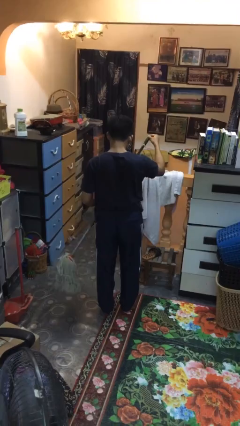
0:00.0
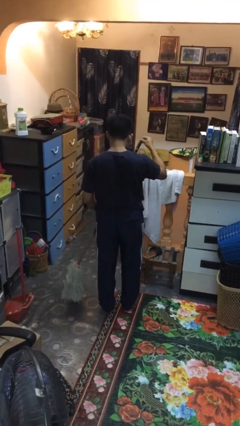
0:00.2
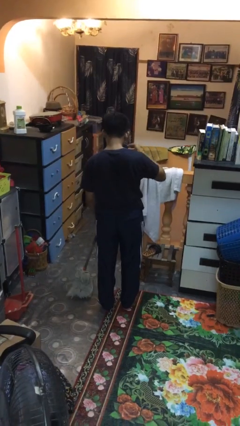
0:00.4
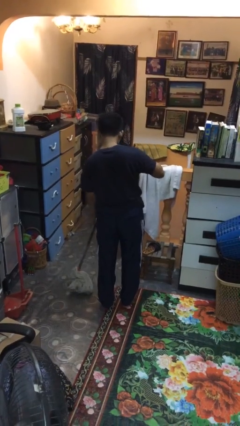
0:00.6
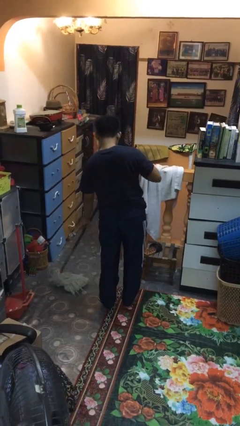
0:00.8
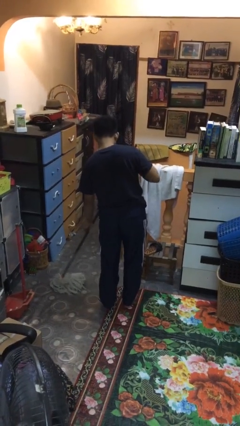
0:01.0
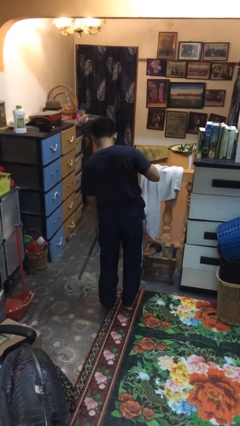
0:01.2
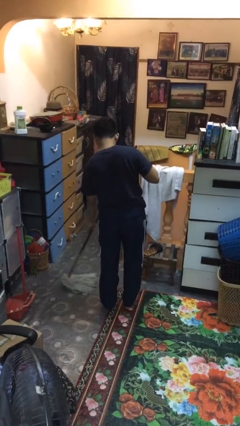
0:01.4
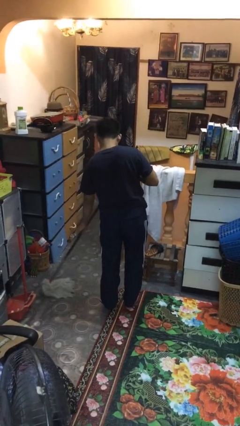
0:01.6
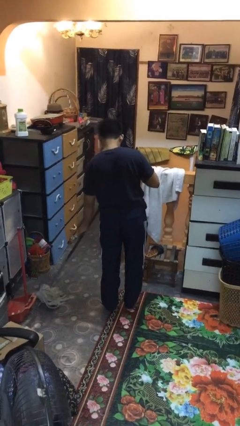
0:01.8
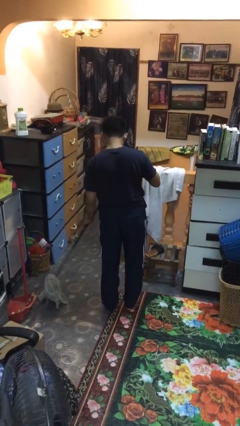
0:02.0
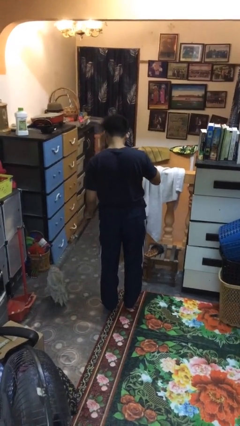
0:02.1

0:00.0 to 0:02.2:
person mops

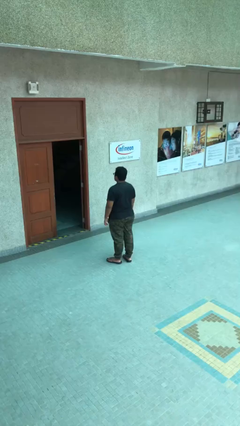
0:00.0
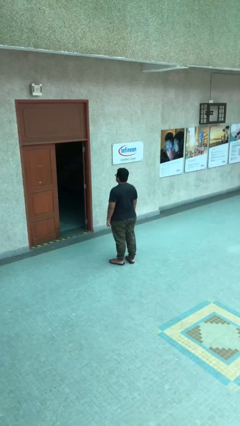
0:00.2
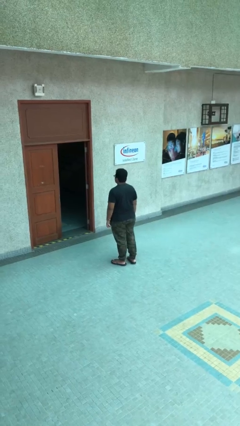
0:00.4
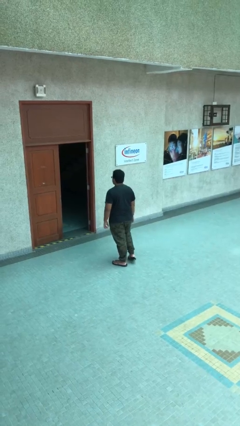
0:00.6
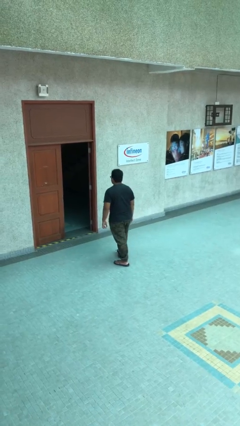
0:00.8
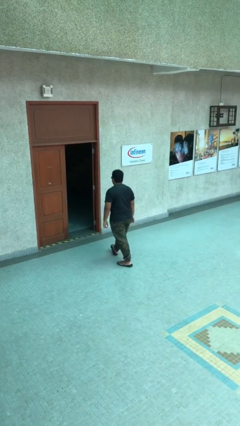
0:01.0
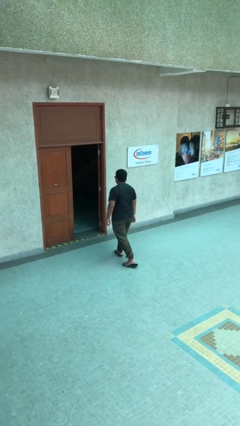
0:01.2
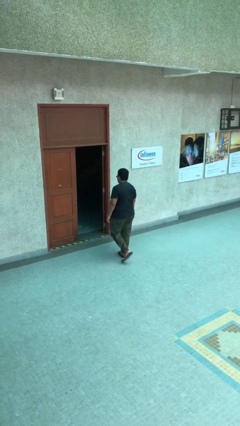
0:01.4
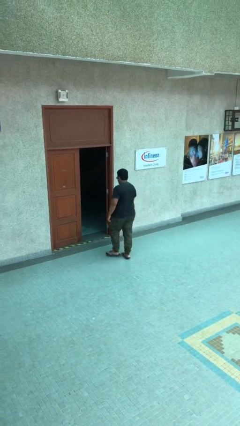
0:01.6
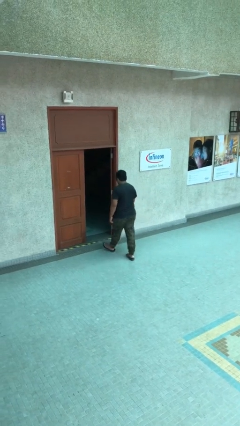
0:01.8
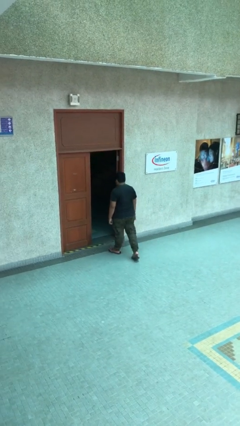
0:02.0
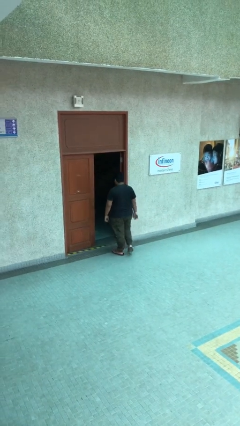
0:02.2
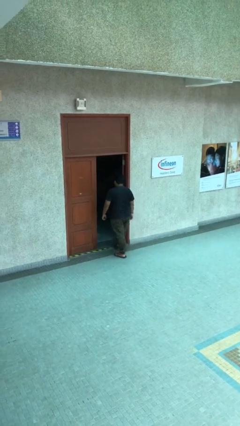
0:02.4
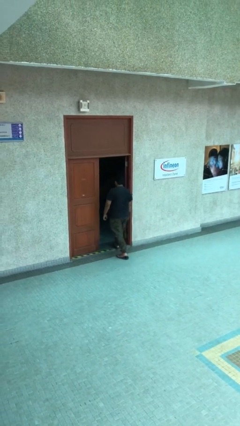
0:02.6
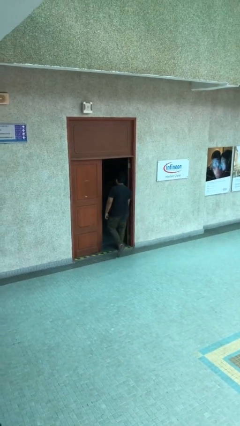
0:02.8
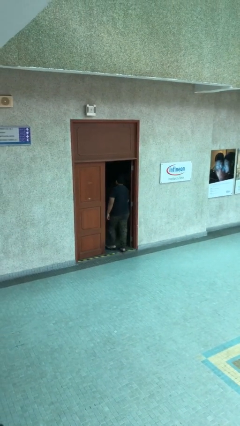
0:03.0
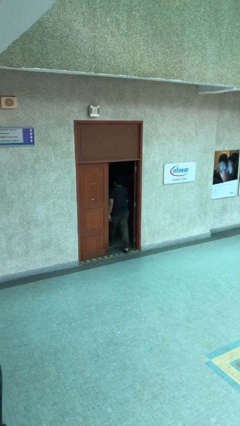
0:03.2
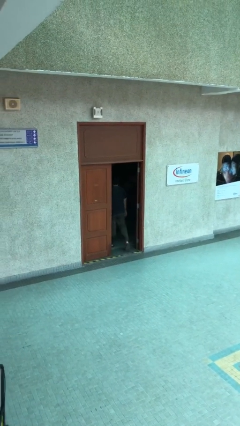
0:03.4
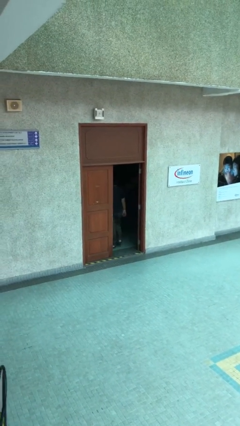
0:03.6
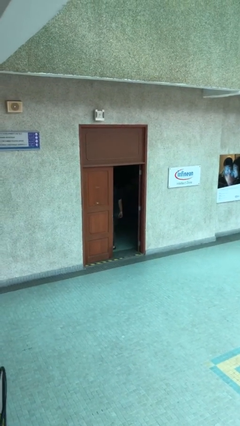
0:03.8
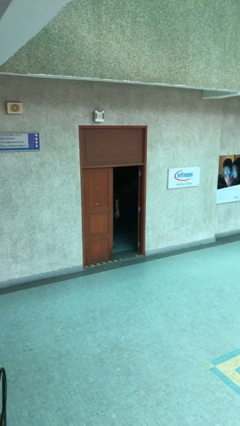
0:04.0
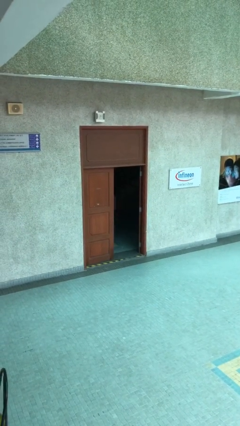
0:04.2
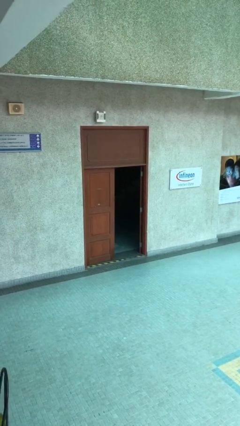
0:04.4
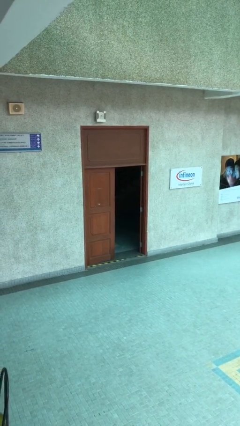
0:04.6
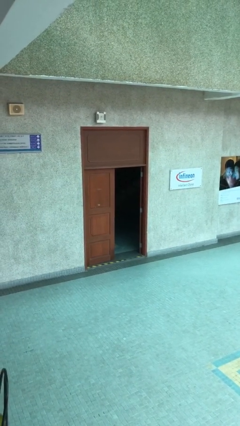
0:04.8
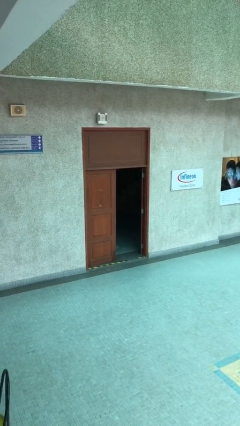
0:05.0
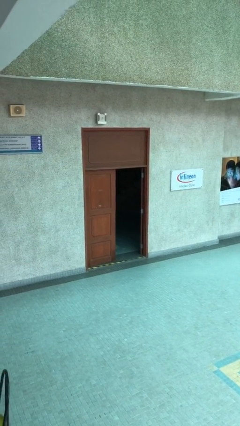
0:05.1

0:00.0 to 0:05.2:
person exits scene through structure

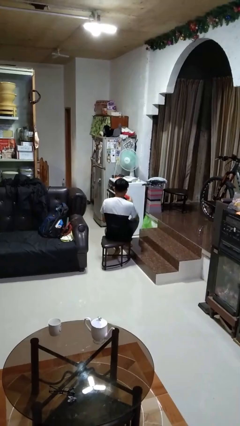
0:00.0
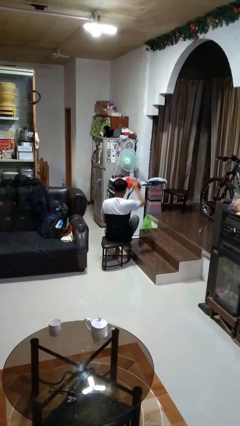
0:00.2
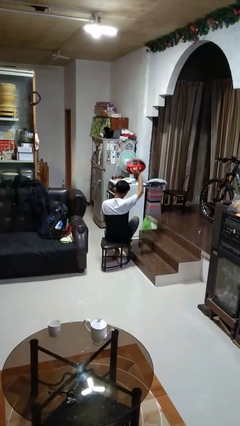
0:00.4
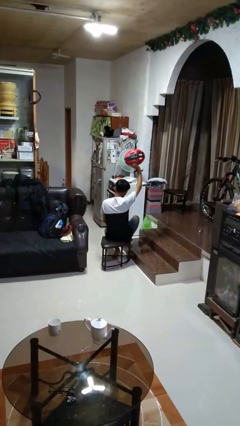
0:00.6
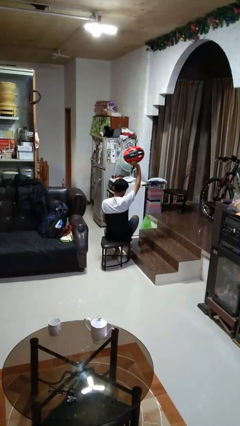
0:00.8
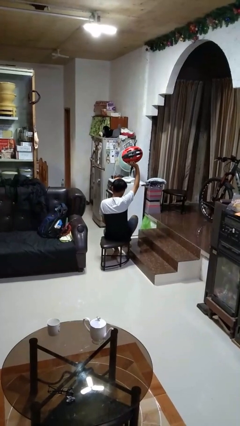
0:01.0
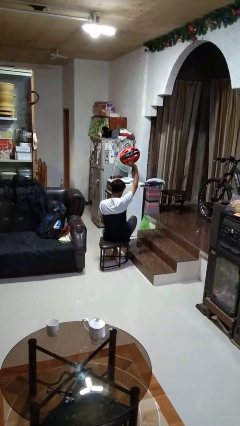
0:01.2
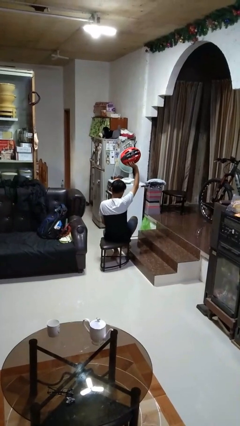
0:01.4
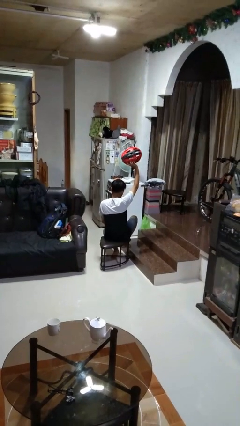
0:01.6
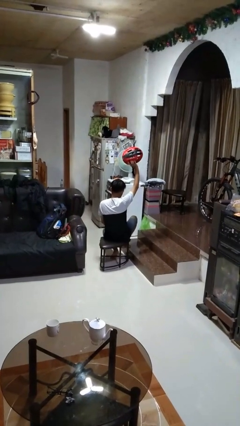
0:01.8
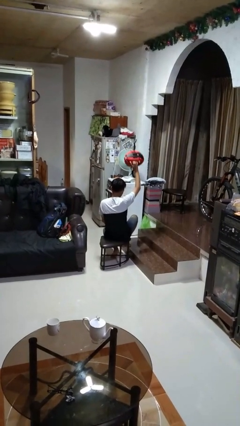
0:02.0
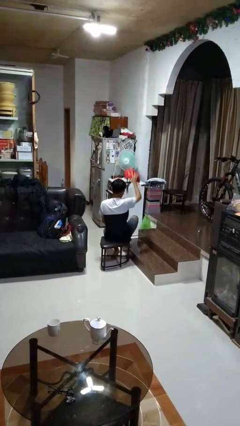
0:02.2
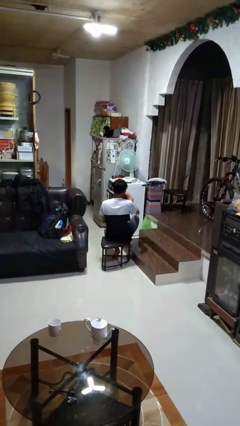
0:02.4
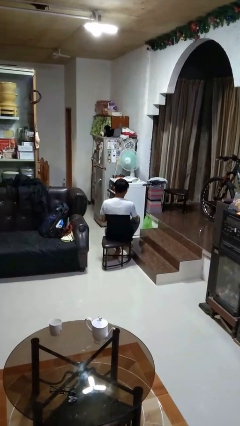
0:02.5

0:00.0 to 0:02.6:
person holds object above head

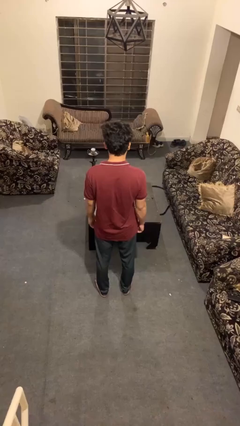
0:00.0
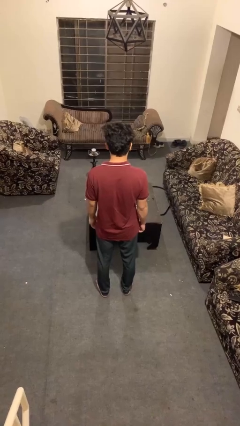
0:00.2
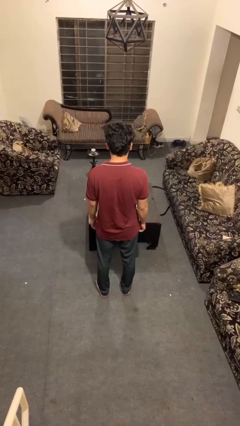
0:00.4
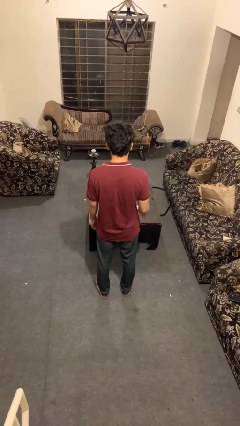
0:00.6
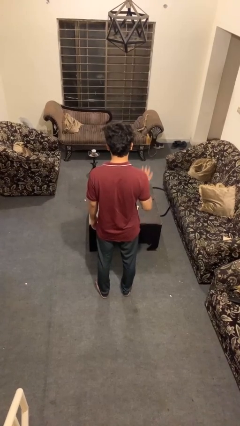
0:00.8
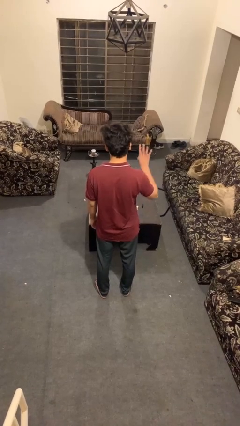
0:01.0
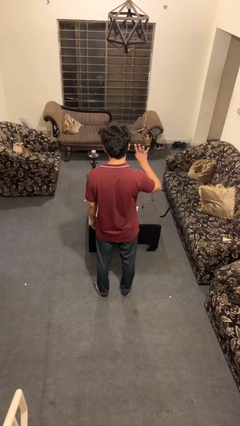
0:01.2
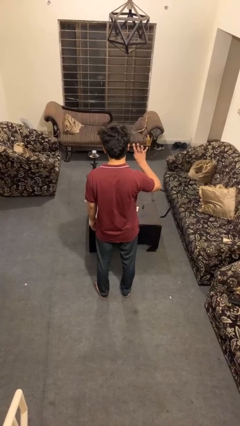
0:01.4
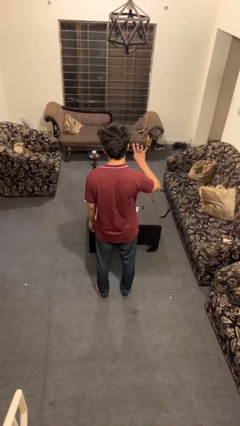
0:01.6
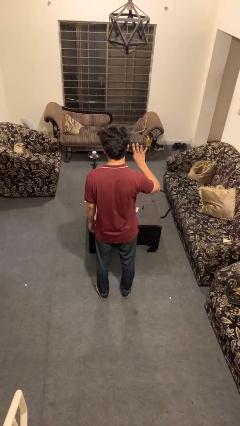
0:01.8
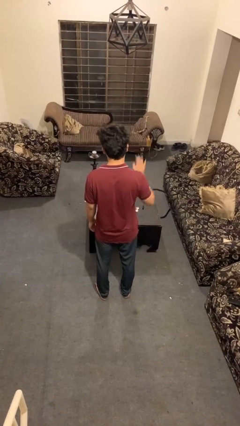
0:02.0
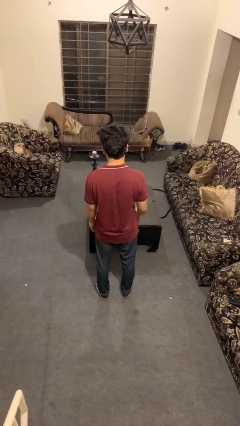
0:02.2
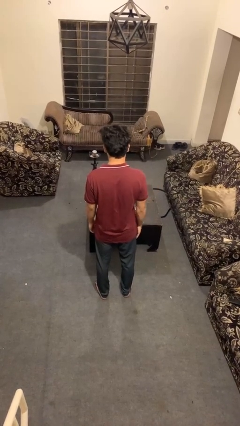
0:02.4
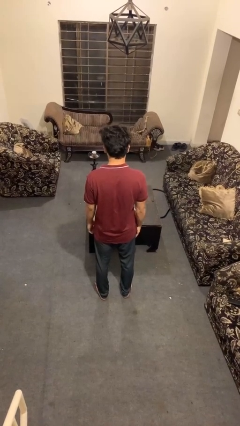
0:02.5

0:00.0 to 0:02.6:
person gestures number four

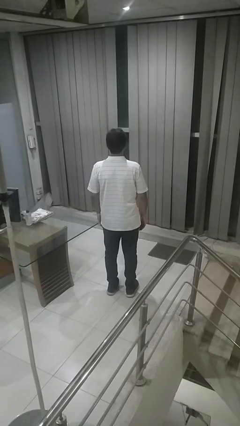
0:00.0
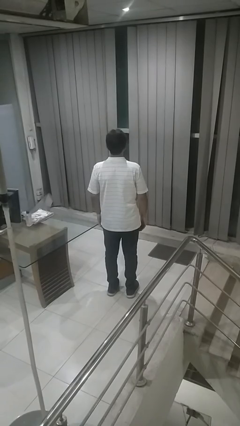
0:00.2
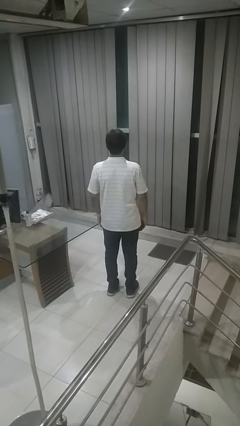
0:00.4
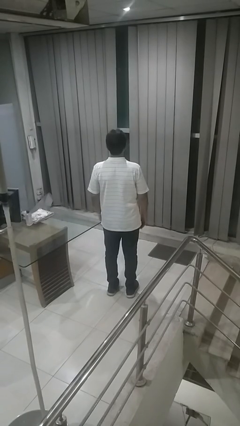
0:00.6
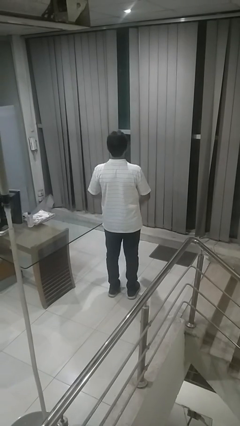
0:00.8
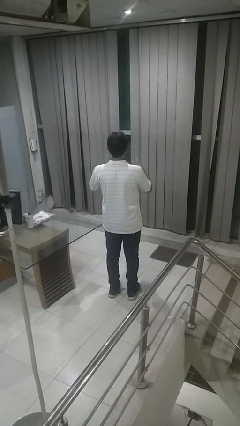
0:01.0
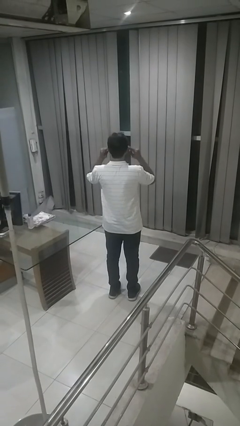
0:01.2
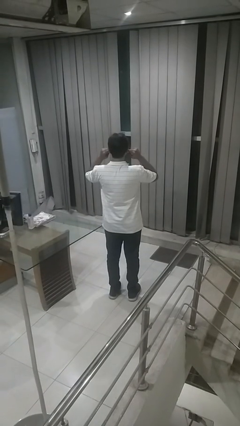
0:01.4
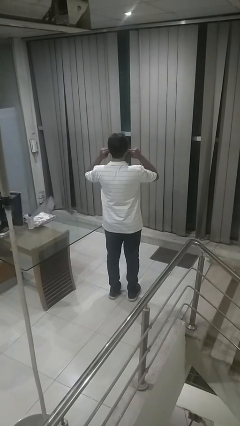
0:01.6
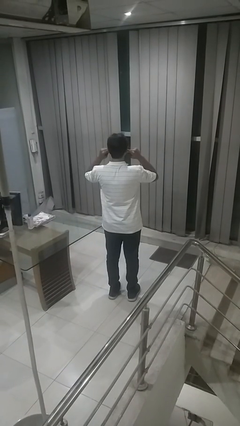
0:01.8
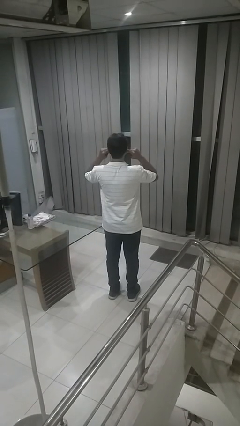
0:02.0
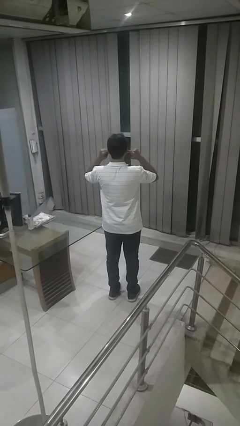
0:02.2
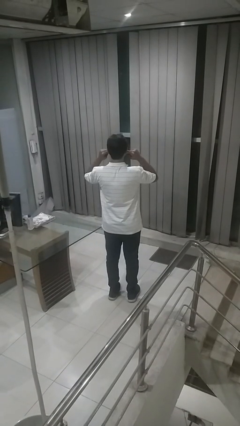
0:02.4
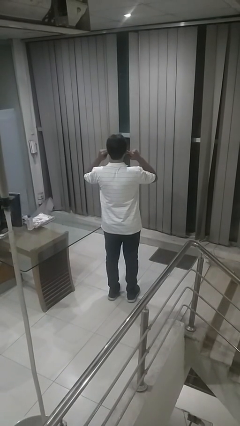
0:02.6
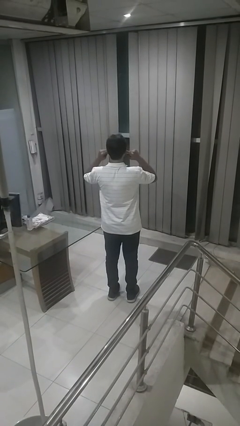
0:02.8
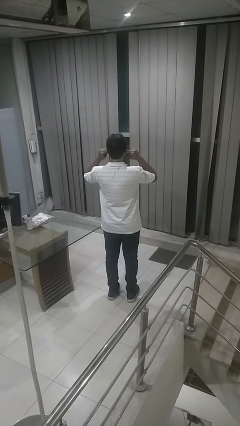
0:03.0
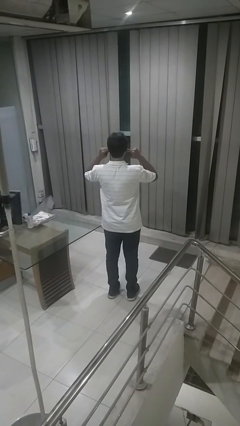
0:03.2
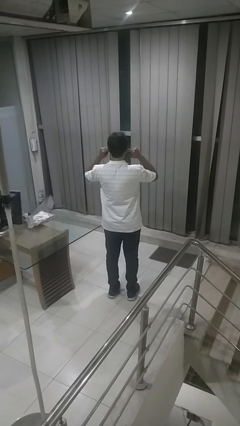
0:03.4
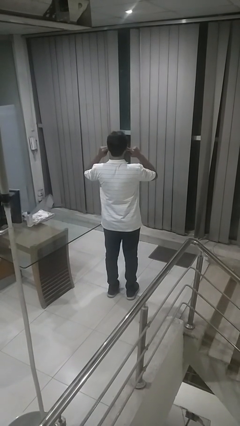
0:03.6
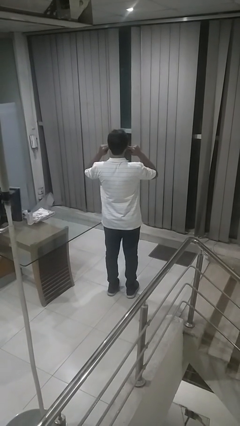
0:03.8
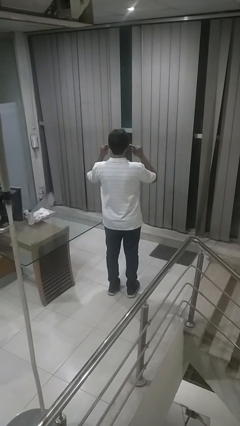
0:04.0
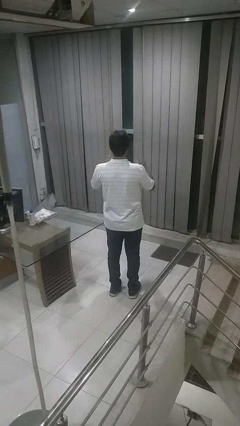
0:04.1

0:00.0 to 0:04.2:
person puts fingers in ear

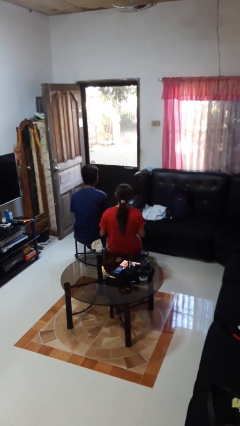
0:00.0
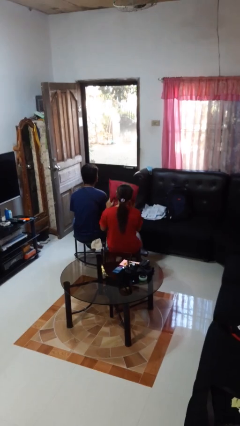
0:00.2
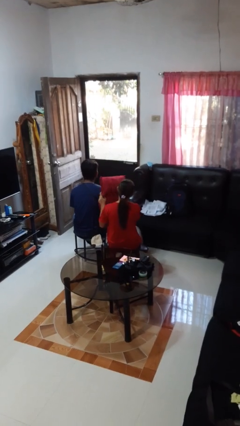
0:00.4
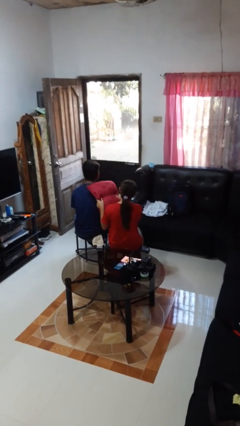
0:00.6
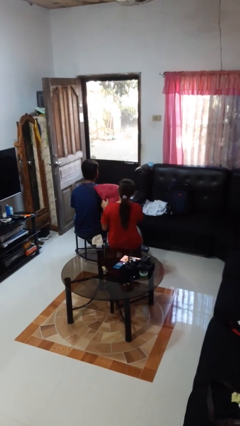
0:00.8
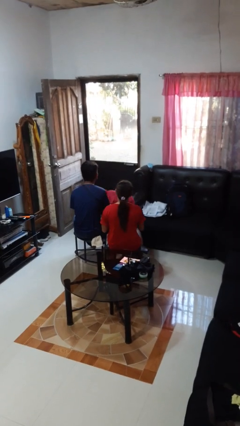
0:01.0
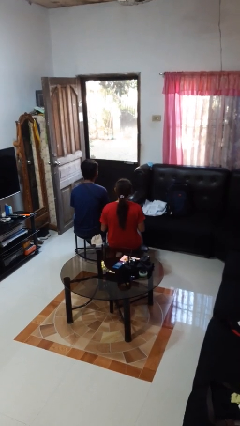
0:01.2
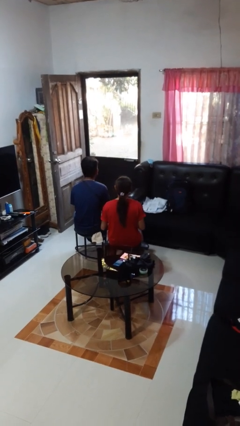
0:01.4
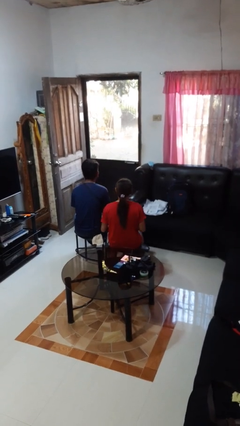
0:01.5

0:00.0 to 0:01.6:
person hits person with pillow
